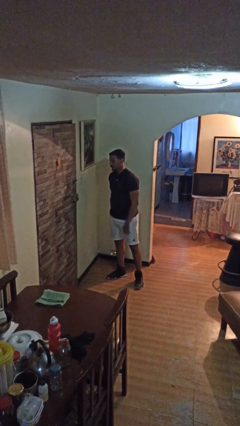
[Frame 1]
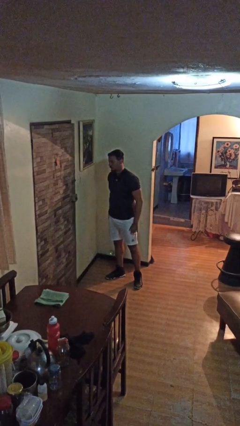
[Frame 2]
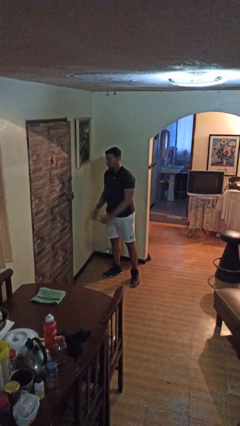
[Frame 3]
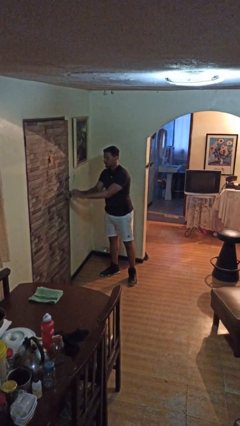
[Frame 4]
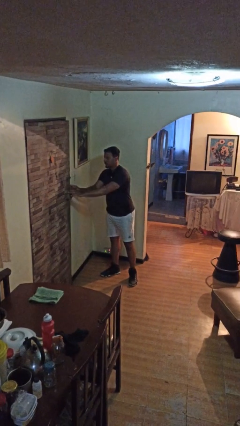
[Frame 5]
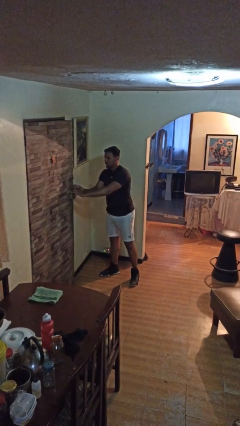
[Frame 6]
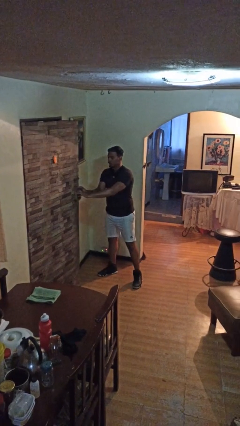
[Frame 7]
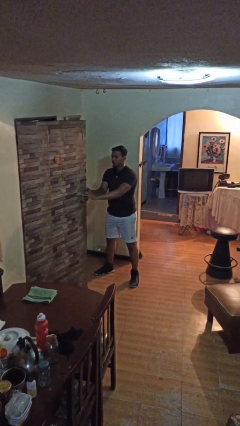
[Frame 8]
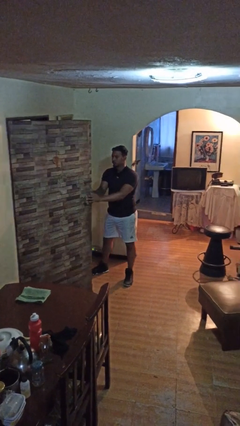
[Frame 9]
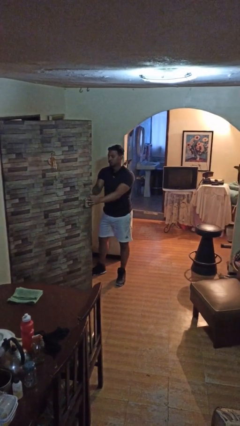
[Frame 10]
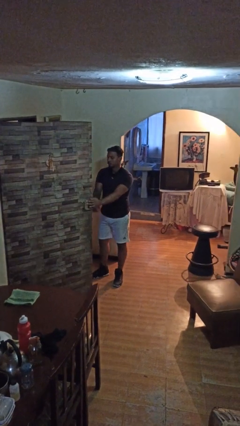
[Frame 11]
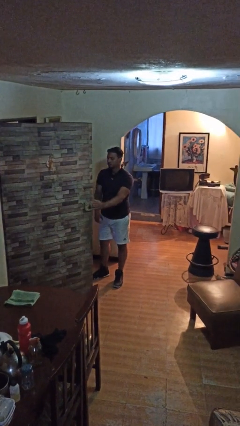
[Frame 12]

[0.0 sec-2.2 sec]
person opens facility door

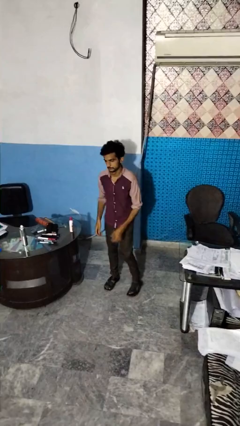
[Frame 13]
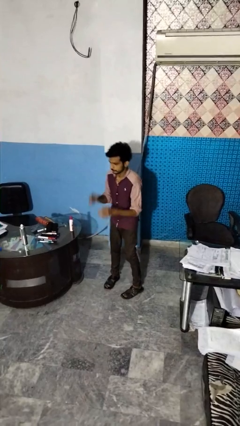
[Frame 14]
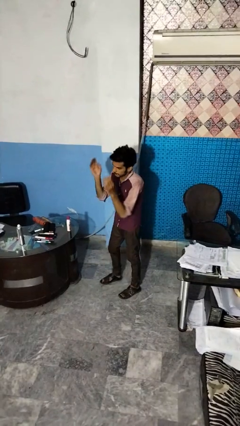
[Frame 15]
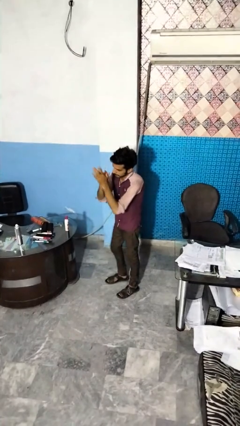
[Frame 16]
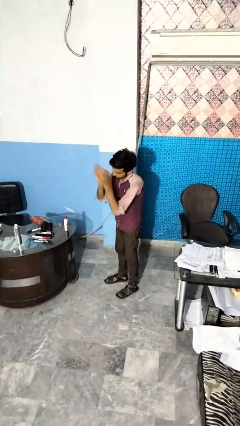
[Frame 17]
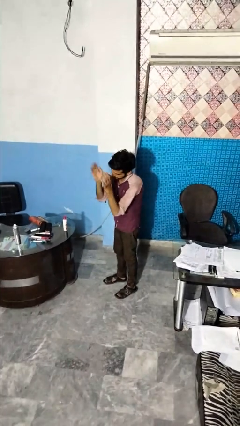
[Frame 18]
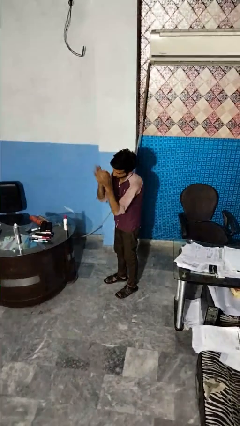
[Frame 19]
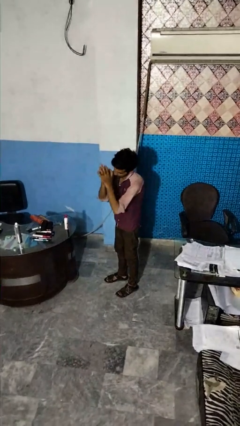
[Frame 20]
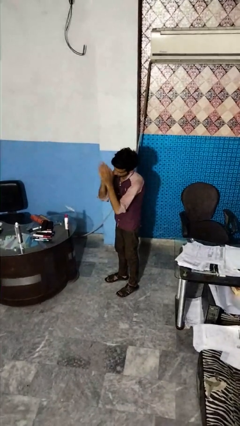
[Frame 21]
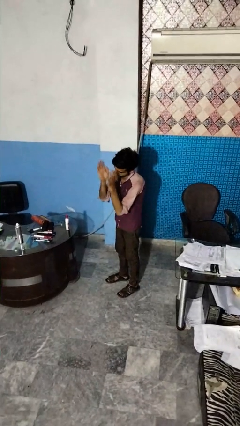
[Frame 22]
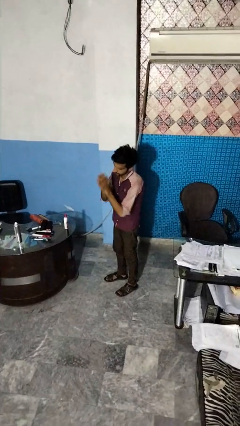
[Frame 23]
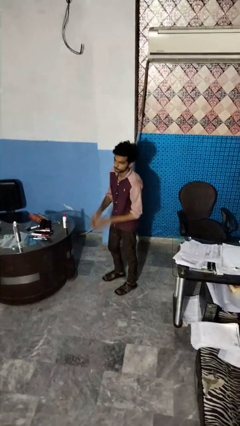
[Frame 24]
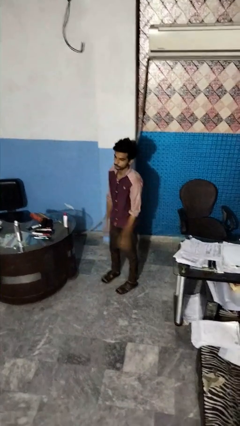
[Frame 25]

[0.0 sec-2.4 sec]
person claps hands

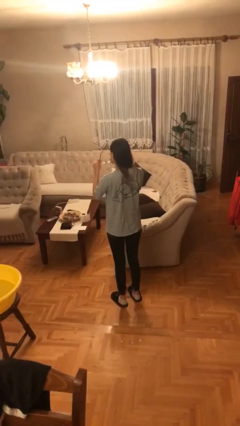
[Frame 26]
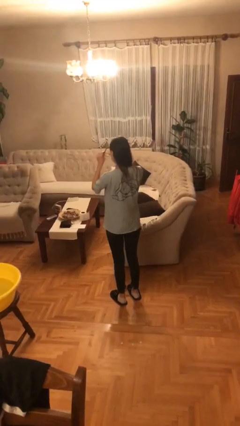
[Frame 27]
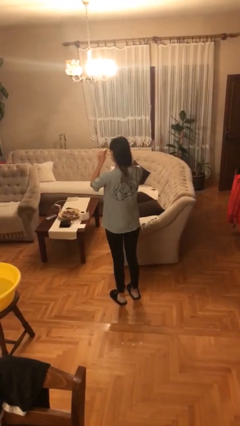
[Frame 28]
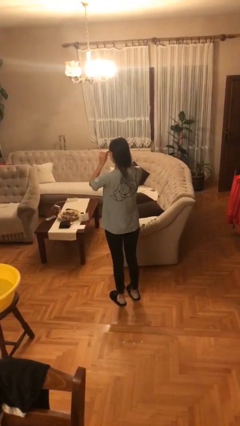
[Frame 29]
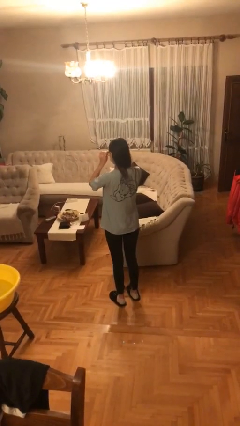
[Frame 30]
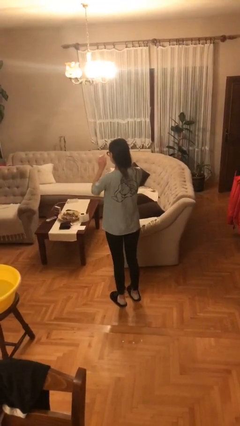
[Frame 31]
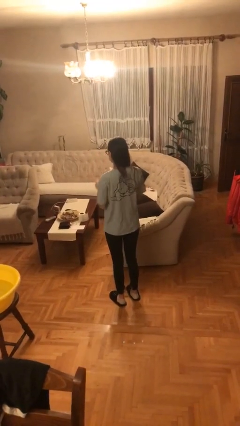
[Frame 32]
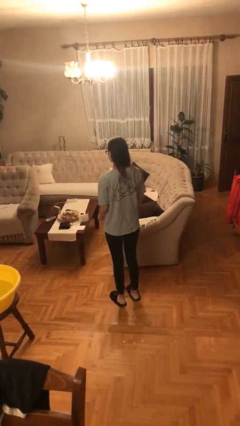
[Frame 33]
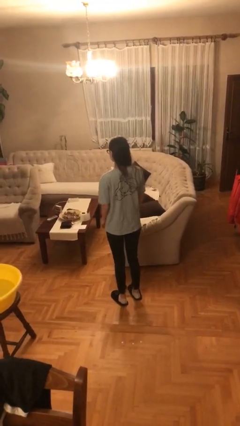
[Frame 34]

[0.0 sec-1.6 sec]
person puts on glasses

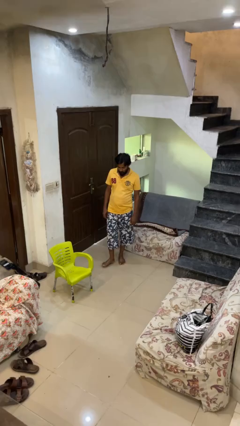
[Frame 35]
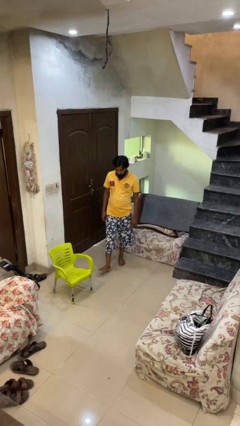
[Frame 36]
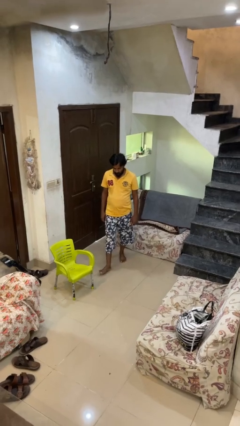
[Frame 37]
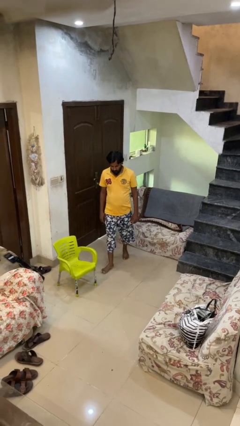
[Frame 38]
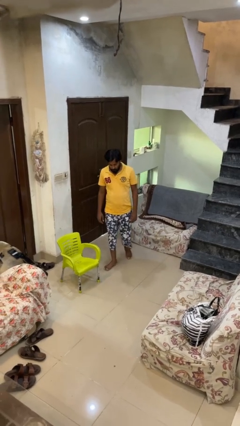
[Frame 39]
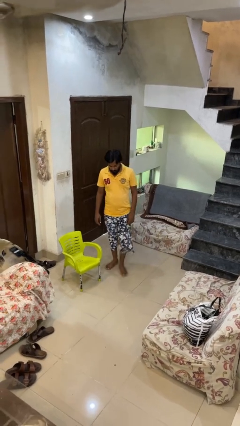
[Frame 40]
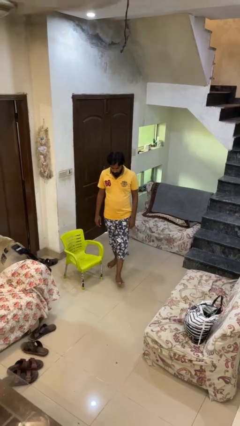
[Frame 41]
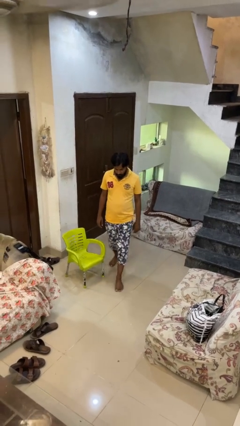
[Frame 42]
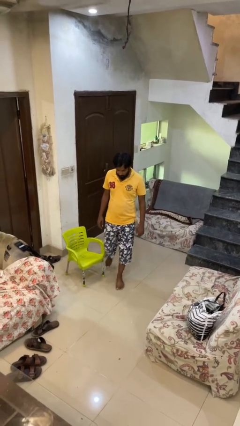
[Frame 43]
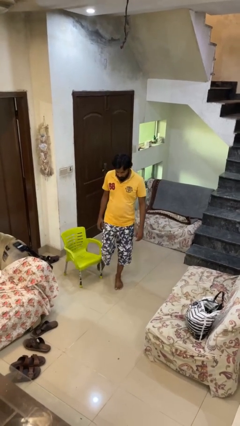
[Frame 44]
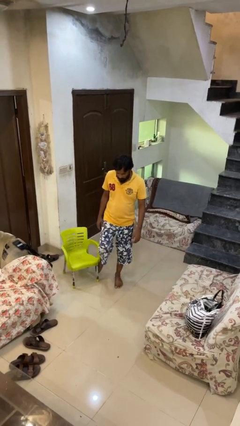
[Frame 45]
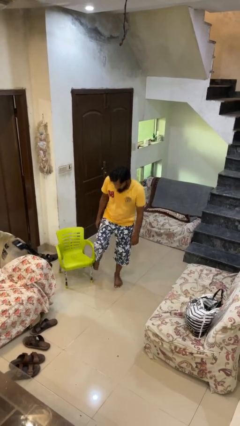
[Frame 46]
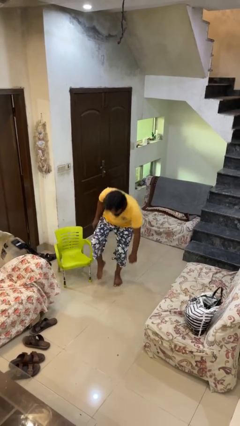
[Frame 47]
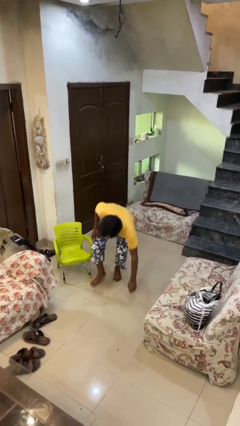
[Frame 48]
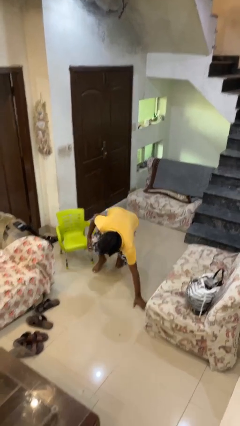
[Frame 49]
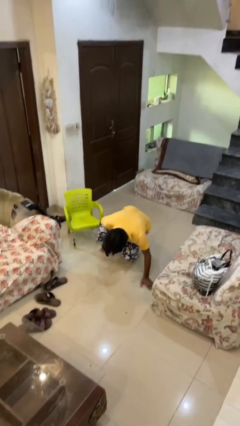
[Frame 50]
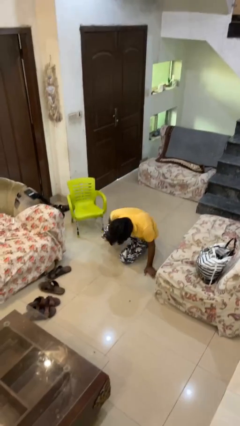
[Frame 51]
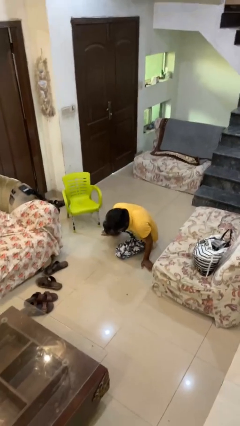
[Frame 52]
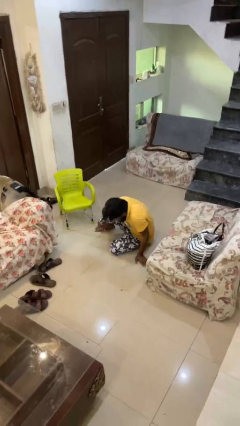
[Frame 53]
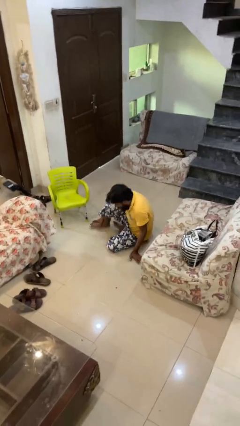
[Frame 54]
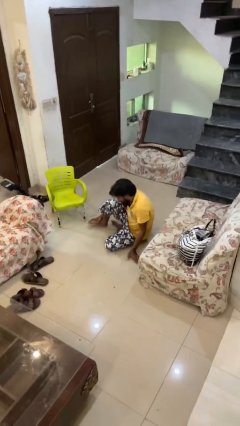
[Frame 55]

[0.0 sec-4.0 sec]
person trips on object on floor

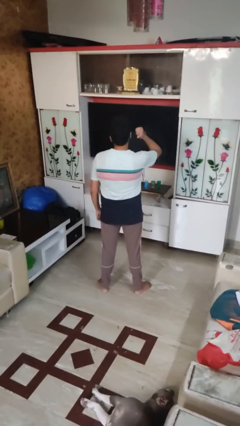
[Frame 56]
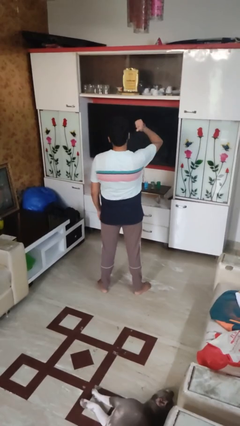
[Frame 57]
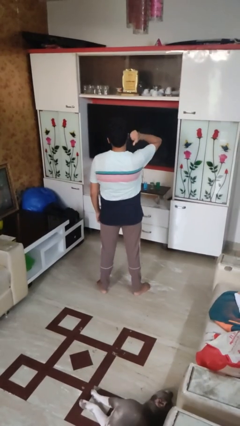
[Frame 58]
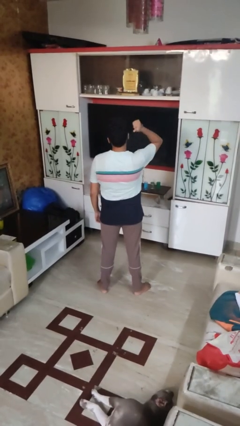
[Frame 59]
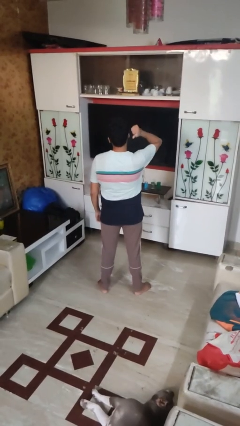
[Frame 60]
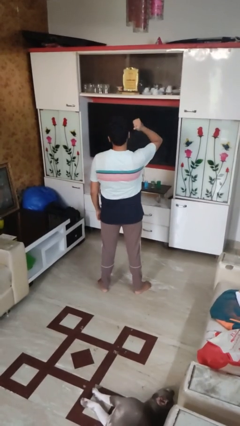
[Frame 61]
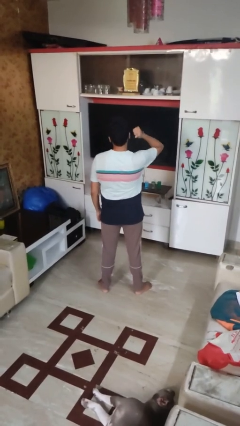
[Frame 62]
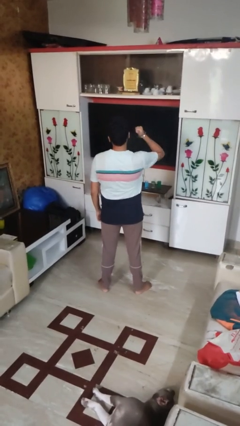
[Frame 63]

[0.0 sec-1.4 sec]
person gestures behind me

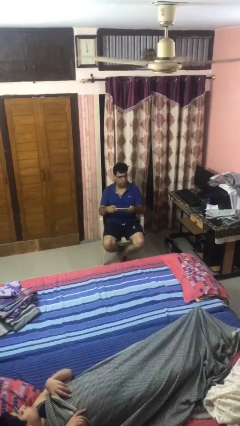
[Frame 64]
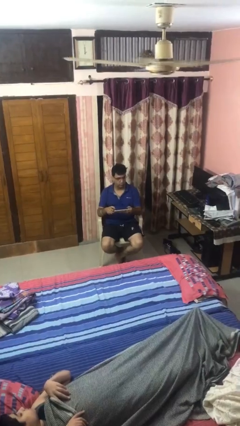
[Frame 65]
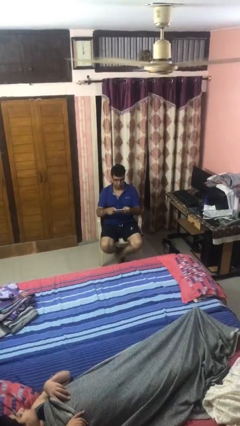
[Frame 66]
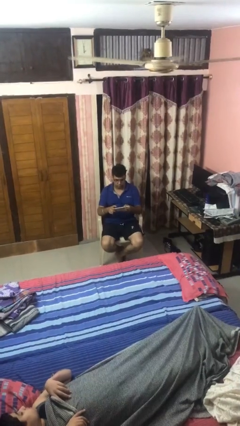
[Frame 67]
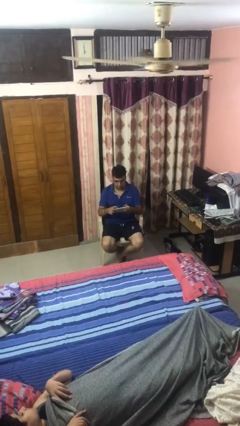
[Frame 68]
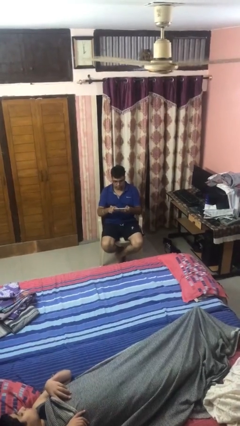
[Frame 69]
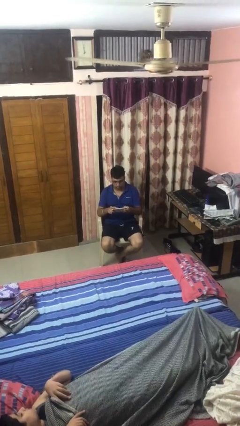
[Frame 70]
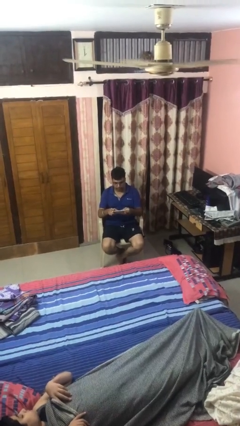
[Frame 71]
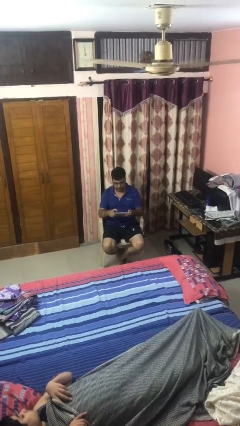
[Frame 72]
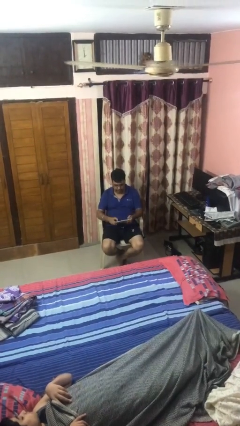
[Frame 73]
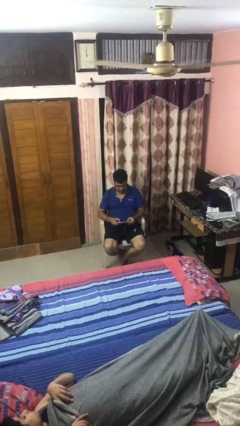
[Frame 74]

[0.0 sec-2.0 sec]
person interacts with tablet

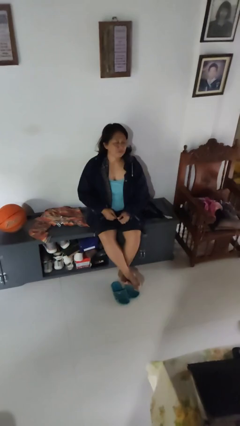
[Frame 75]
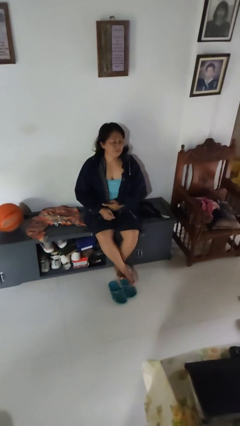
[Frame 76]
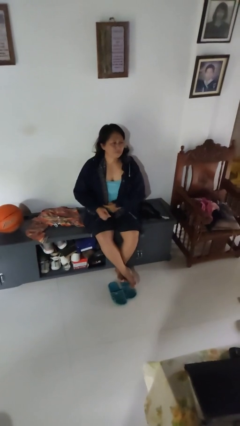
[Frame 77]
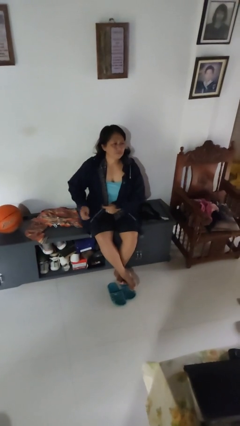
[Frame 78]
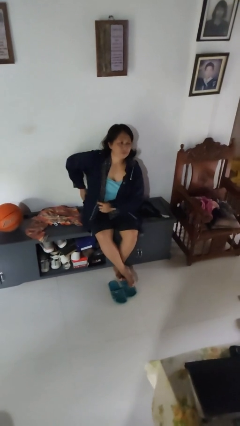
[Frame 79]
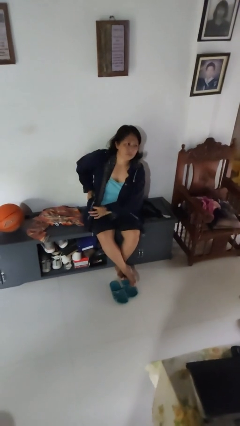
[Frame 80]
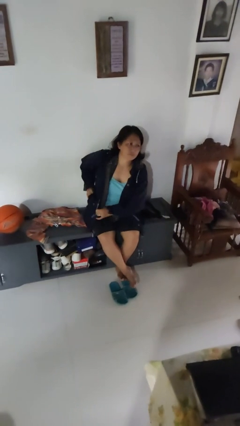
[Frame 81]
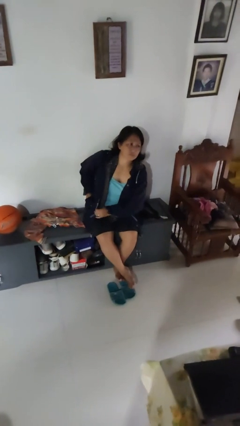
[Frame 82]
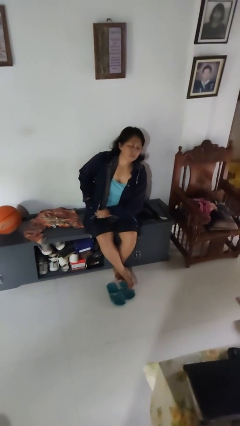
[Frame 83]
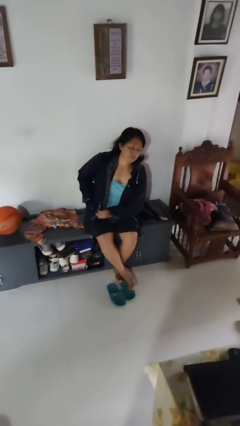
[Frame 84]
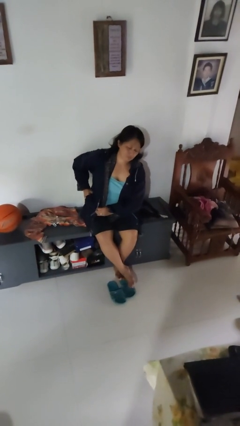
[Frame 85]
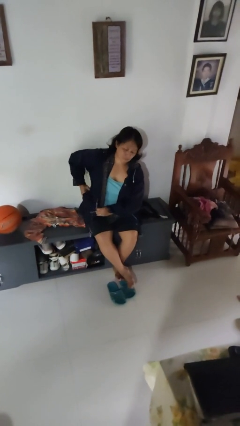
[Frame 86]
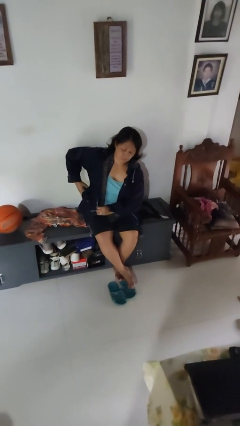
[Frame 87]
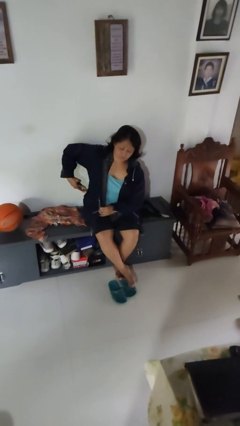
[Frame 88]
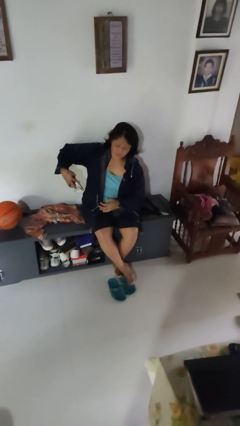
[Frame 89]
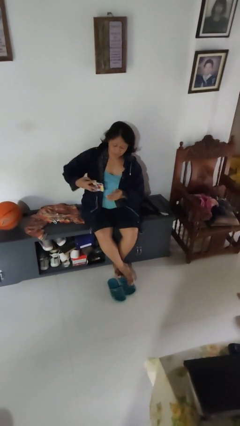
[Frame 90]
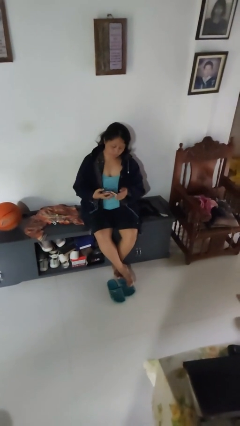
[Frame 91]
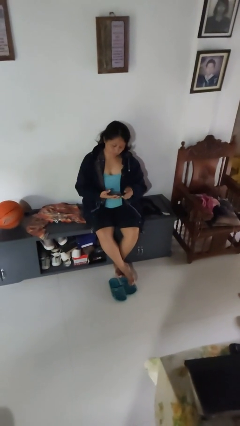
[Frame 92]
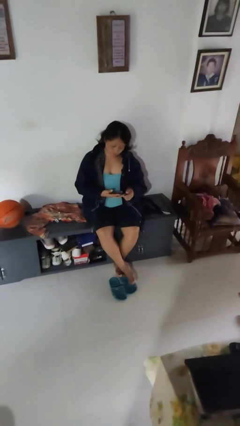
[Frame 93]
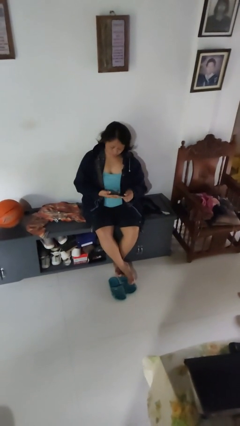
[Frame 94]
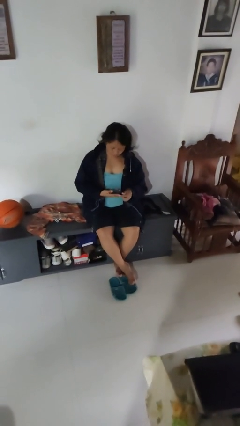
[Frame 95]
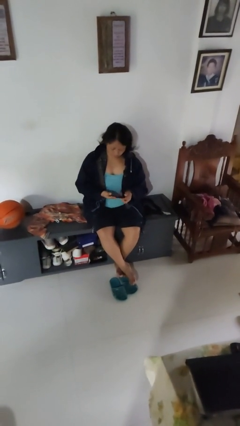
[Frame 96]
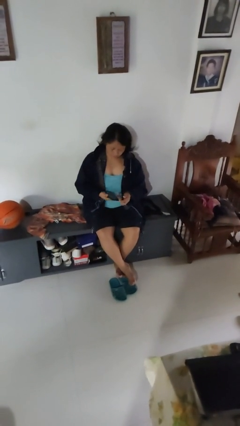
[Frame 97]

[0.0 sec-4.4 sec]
person takes phone from pocket
